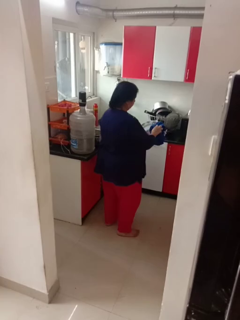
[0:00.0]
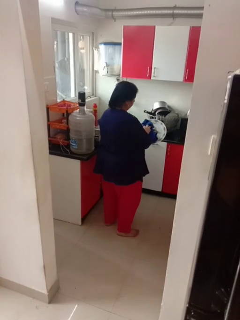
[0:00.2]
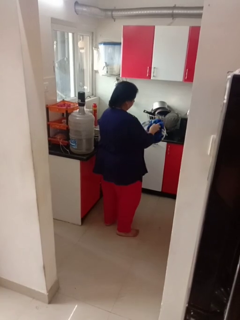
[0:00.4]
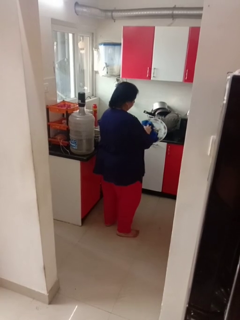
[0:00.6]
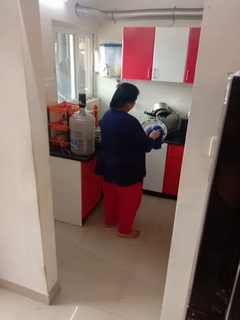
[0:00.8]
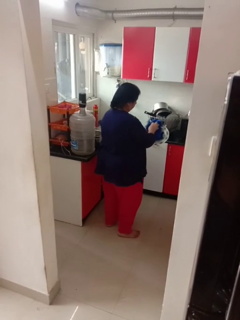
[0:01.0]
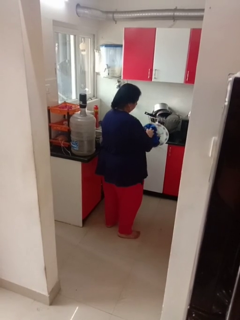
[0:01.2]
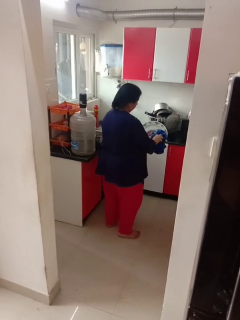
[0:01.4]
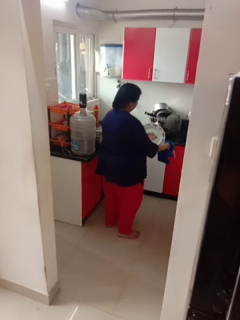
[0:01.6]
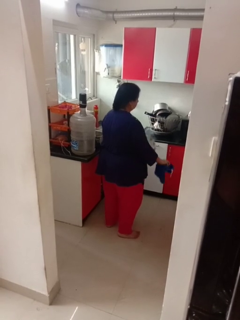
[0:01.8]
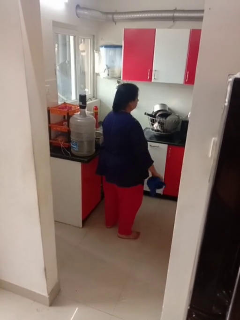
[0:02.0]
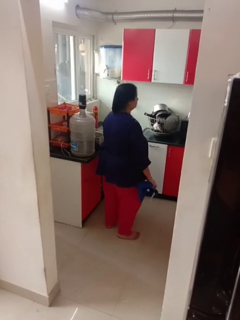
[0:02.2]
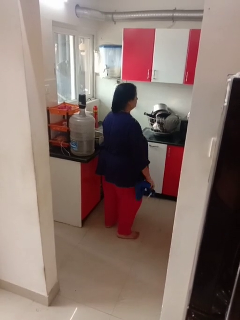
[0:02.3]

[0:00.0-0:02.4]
person dries dish

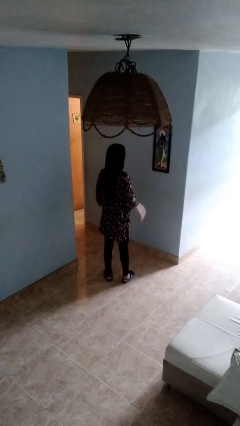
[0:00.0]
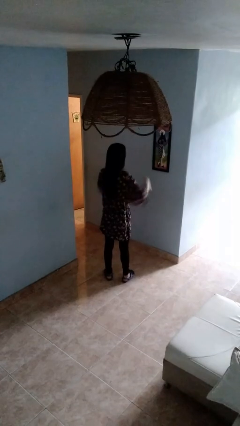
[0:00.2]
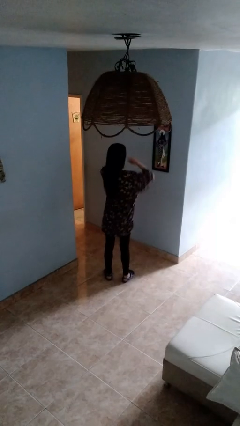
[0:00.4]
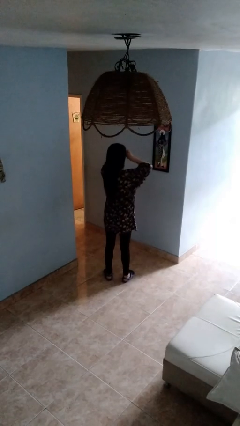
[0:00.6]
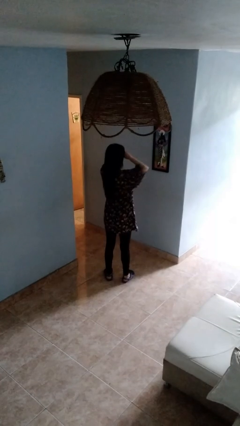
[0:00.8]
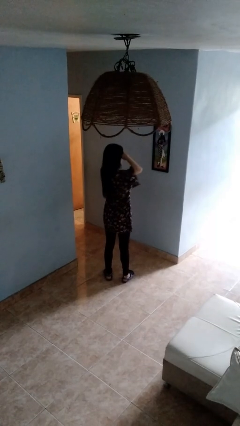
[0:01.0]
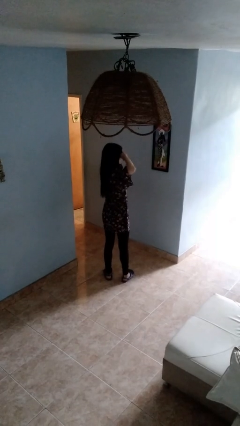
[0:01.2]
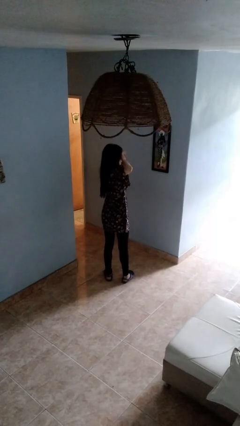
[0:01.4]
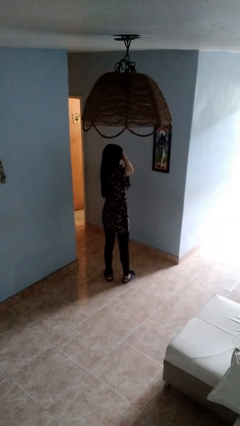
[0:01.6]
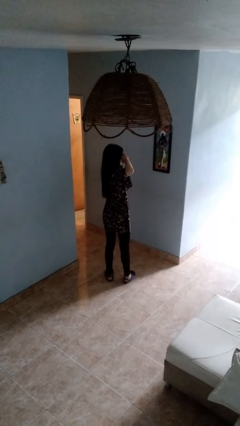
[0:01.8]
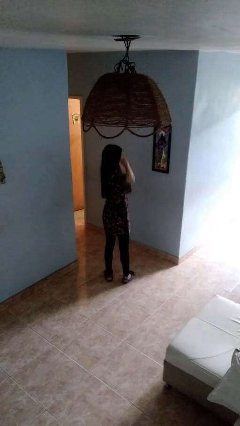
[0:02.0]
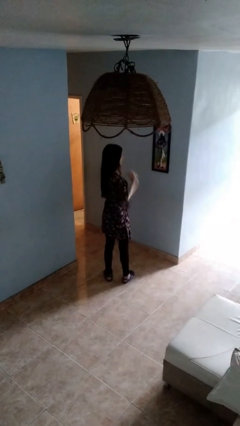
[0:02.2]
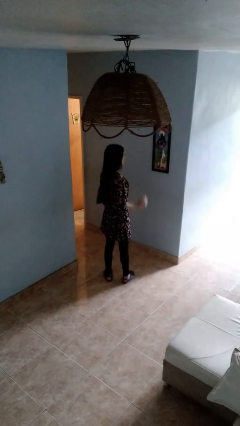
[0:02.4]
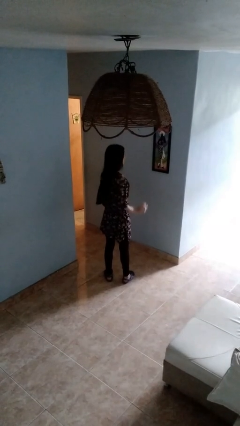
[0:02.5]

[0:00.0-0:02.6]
person rubs eyes

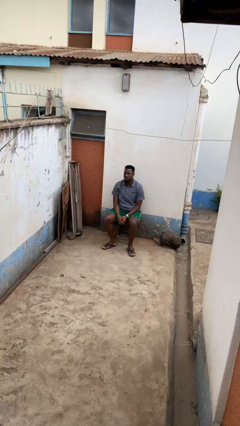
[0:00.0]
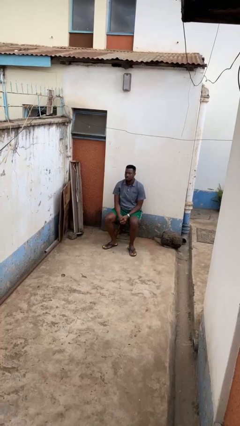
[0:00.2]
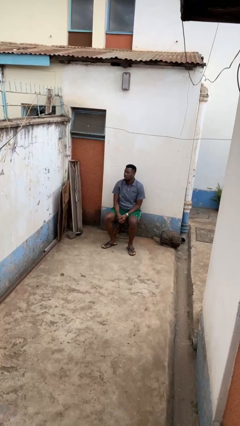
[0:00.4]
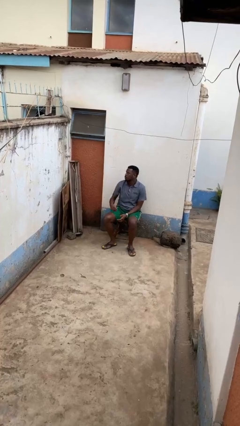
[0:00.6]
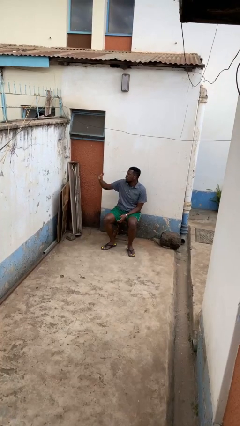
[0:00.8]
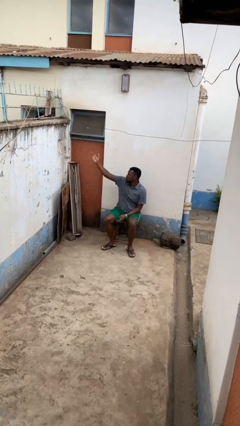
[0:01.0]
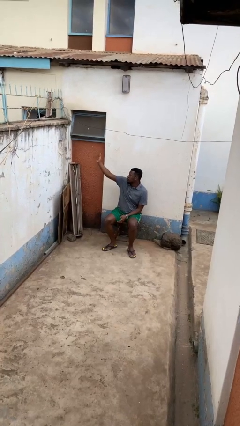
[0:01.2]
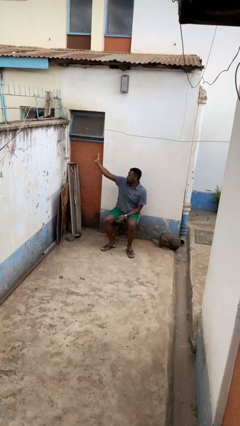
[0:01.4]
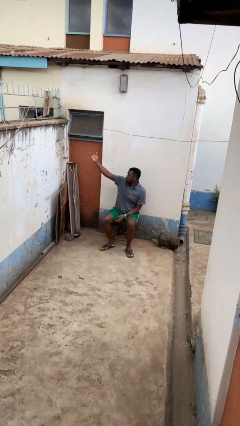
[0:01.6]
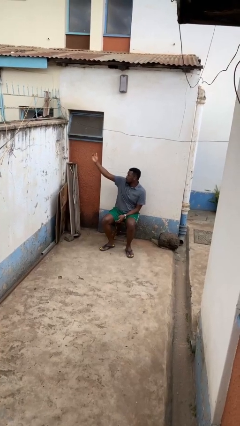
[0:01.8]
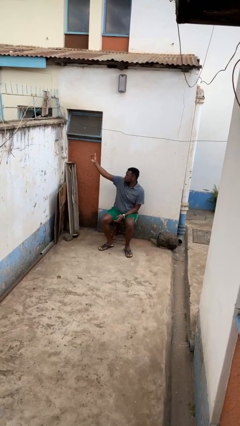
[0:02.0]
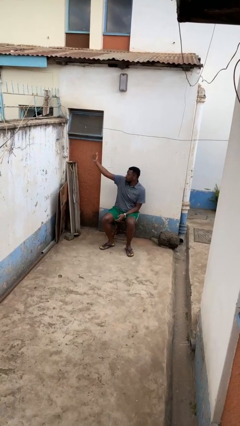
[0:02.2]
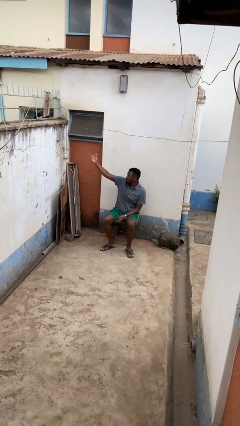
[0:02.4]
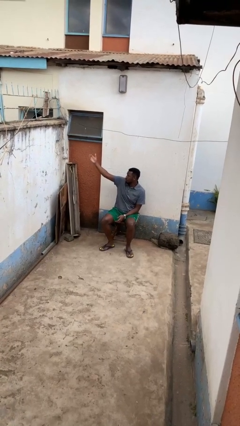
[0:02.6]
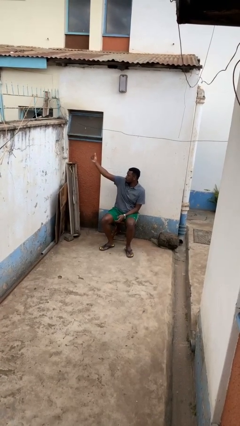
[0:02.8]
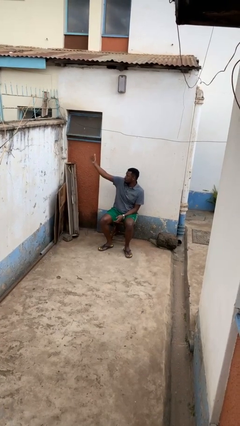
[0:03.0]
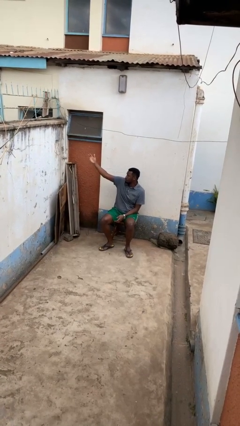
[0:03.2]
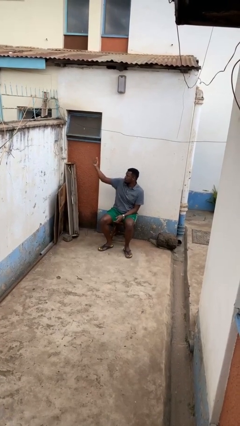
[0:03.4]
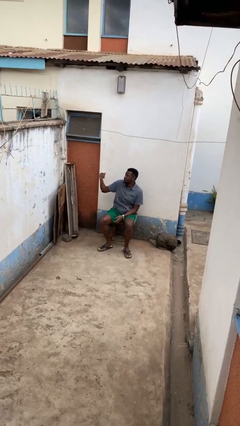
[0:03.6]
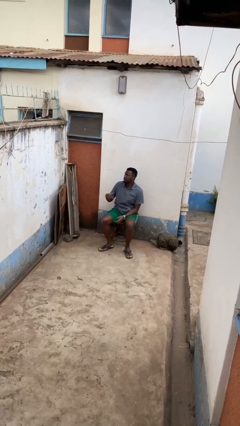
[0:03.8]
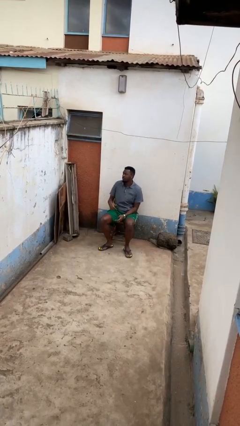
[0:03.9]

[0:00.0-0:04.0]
person gestures come here

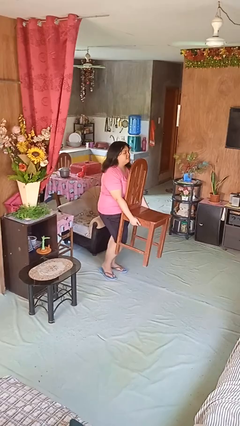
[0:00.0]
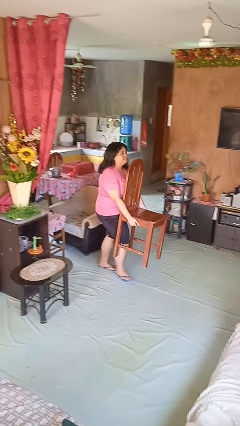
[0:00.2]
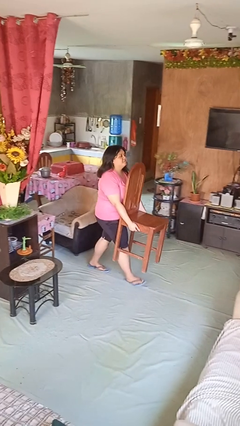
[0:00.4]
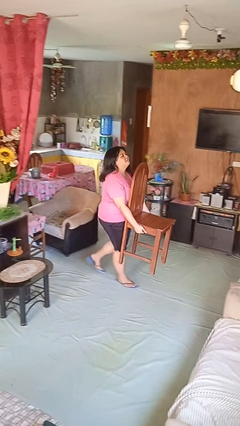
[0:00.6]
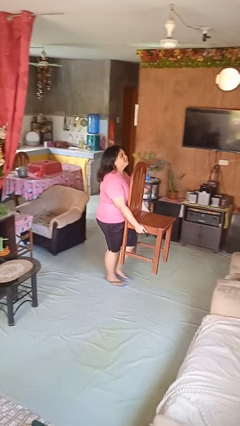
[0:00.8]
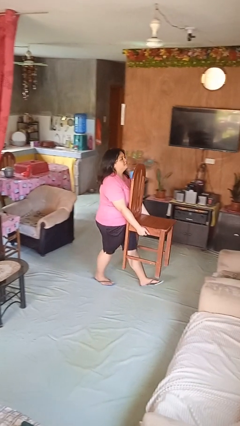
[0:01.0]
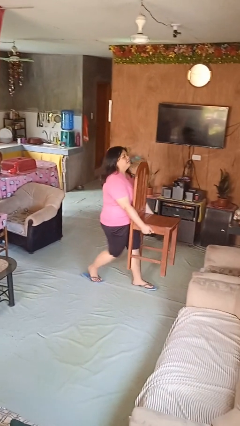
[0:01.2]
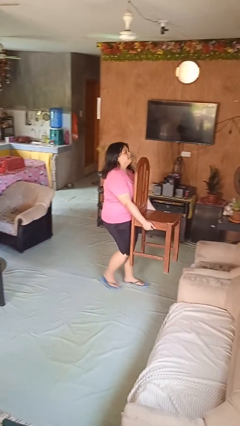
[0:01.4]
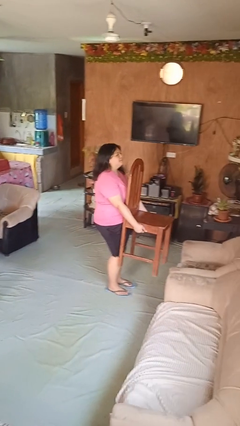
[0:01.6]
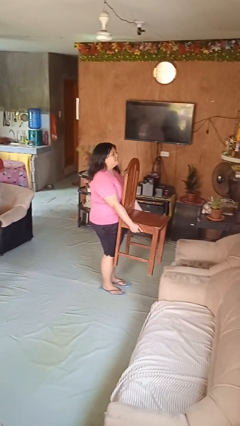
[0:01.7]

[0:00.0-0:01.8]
person carries furniture

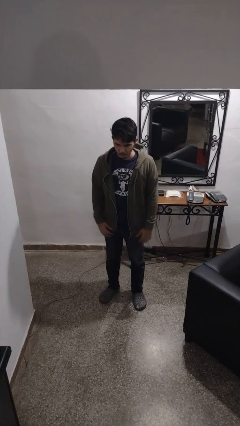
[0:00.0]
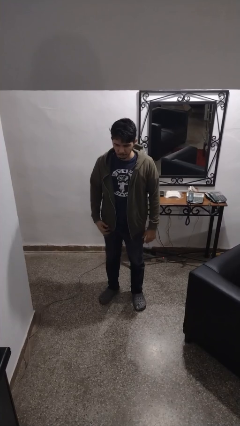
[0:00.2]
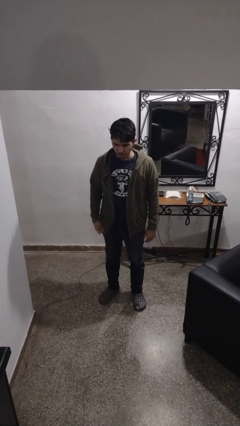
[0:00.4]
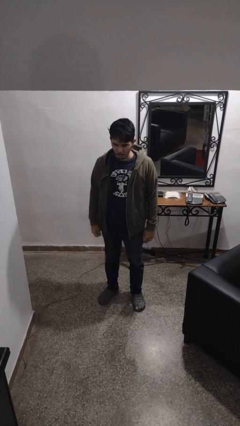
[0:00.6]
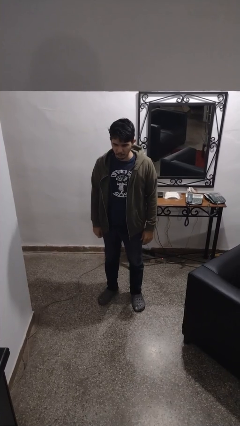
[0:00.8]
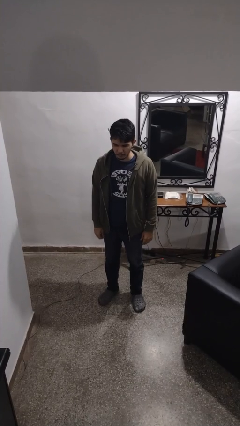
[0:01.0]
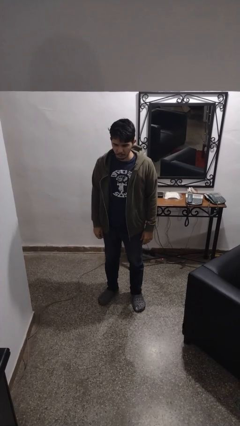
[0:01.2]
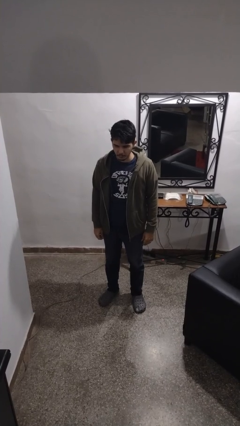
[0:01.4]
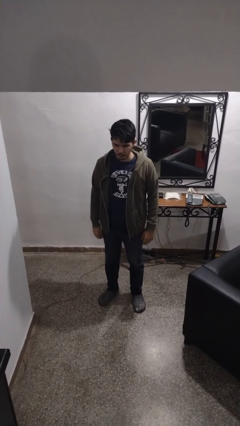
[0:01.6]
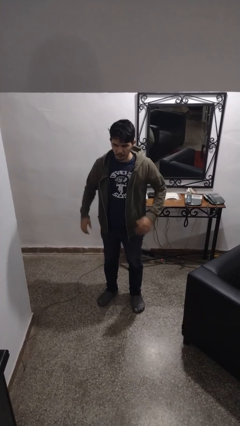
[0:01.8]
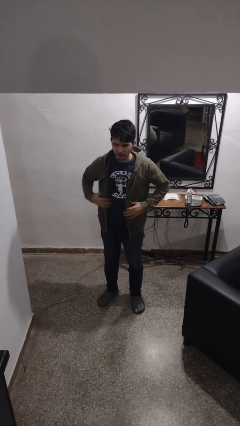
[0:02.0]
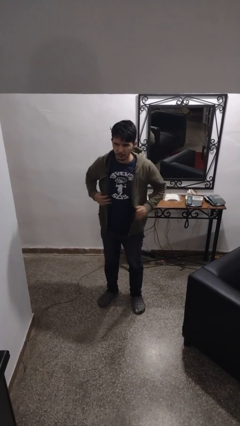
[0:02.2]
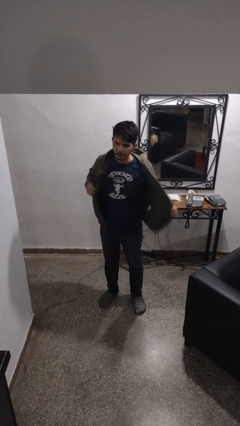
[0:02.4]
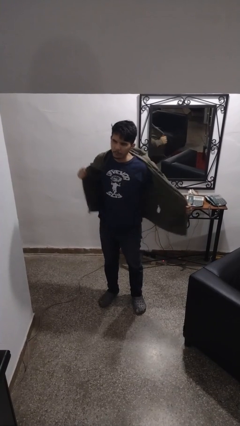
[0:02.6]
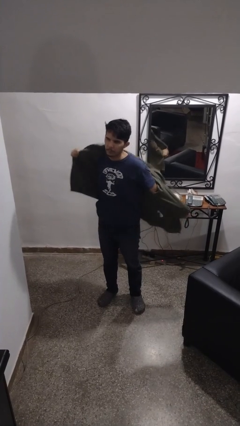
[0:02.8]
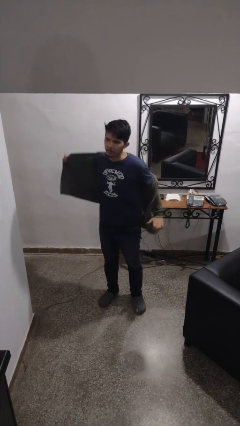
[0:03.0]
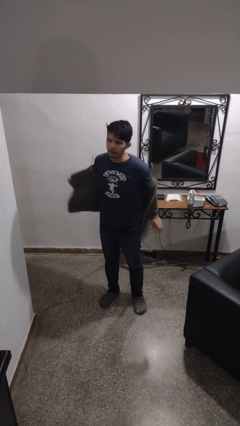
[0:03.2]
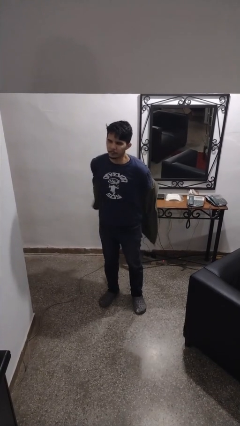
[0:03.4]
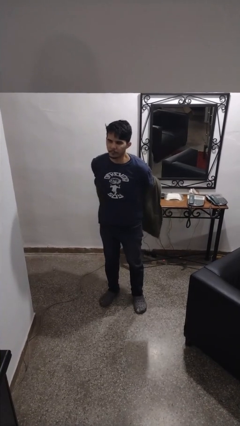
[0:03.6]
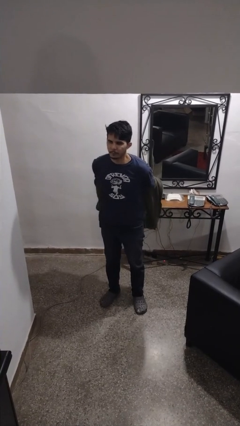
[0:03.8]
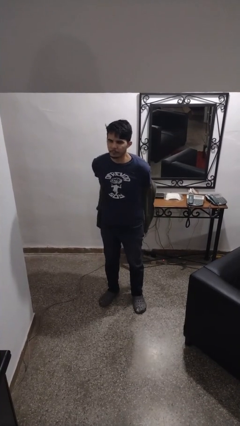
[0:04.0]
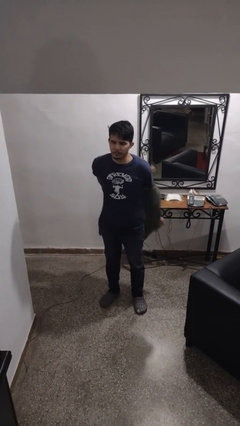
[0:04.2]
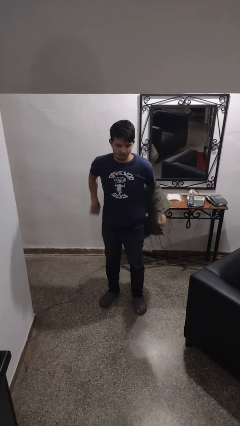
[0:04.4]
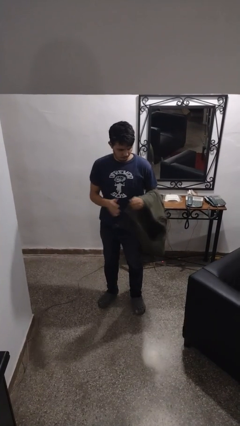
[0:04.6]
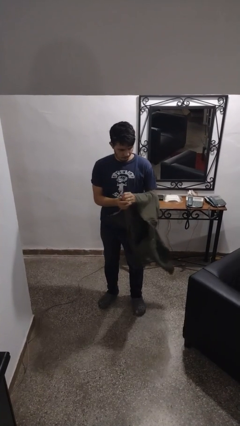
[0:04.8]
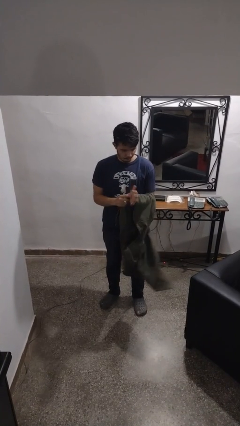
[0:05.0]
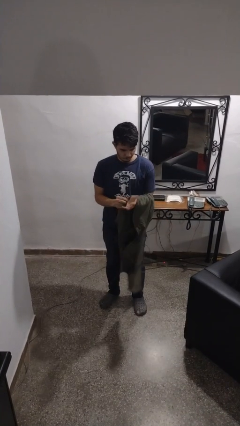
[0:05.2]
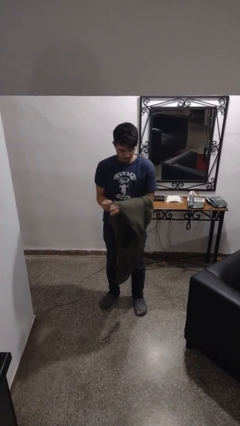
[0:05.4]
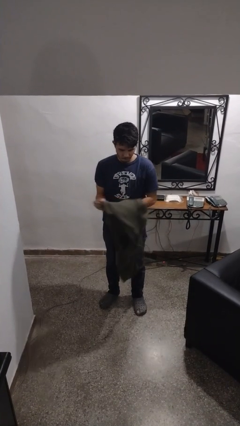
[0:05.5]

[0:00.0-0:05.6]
person takes off jacket

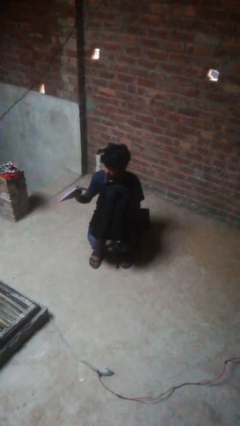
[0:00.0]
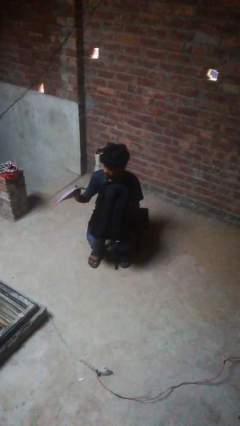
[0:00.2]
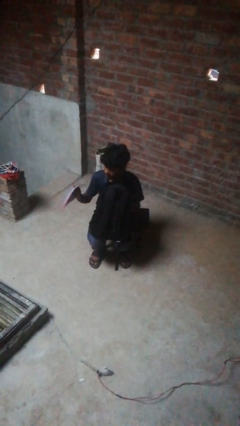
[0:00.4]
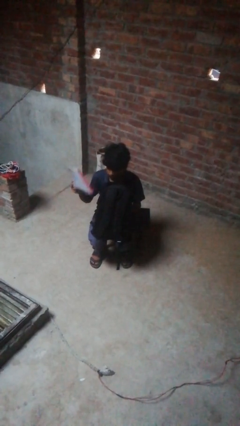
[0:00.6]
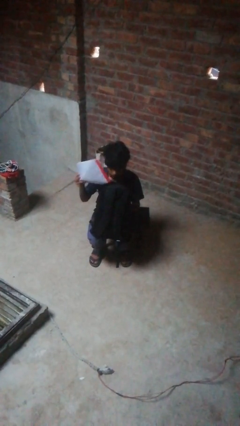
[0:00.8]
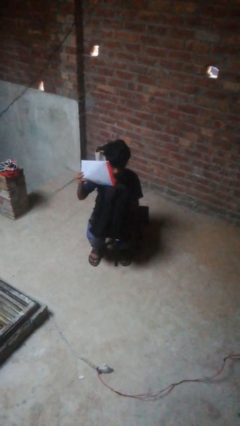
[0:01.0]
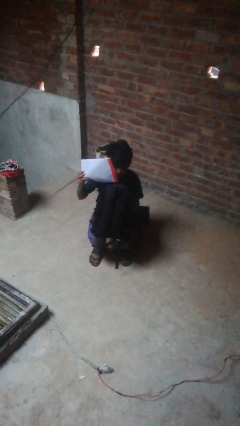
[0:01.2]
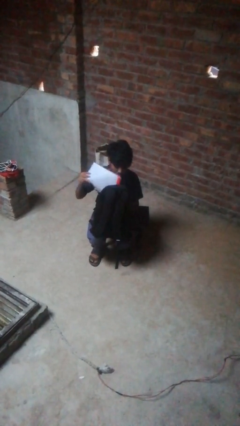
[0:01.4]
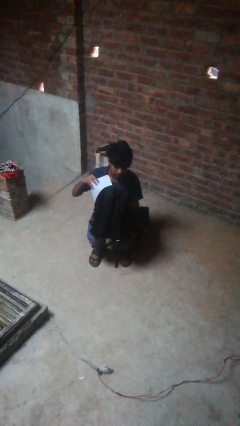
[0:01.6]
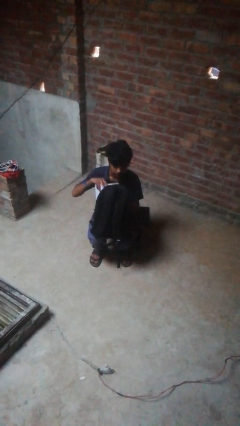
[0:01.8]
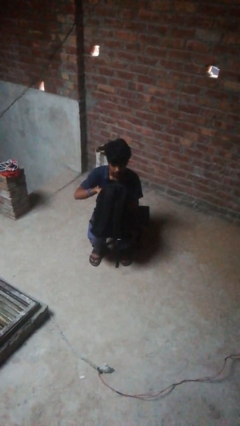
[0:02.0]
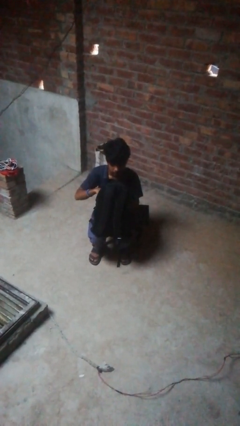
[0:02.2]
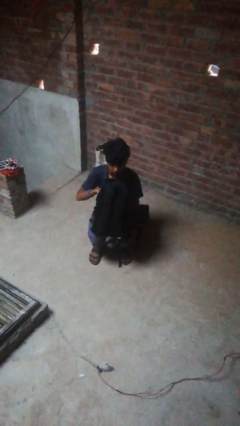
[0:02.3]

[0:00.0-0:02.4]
person puts object into backpack
